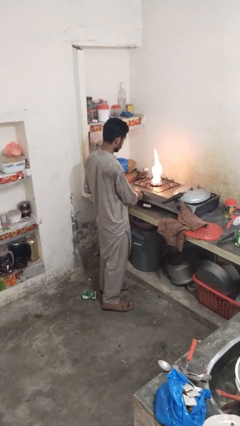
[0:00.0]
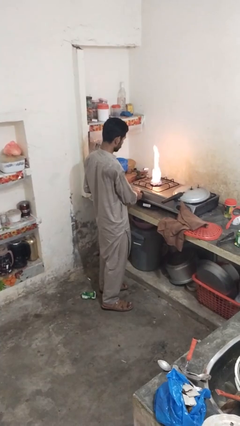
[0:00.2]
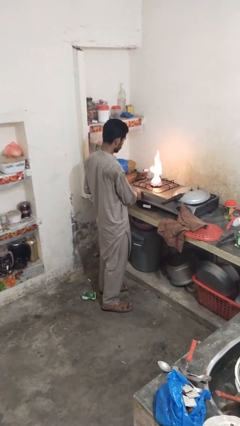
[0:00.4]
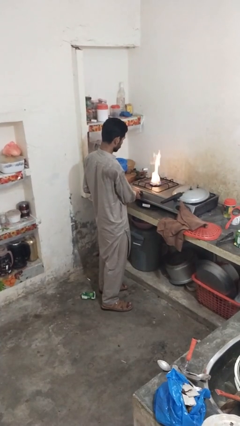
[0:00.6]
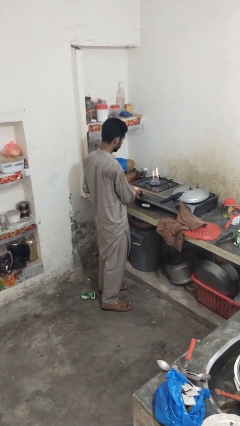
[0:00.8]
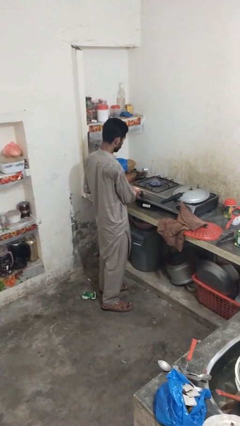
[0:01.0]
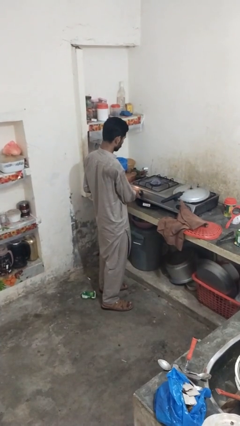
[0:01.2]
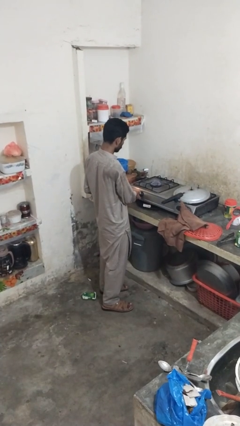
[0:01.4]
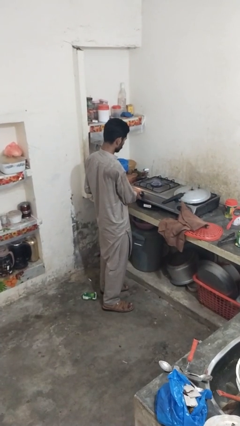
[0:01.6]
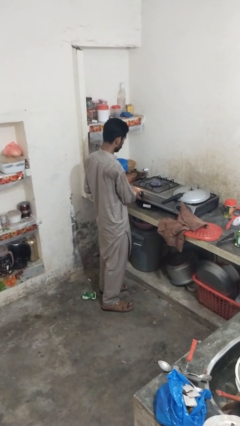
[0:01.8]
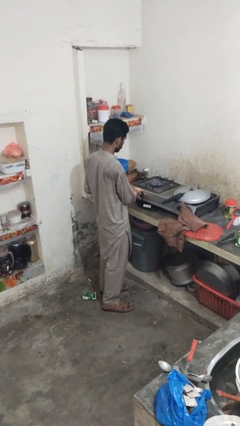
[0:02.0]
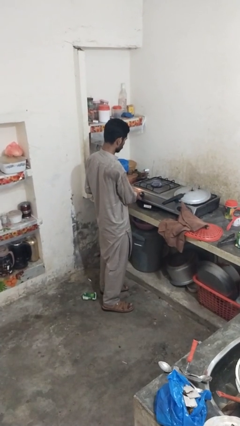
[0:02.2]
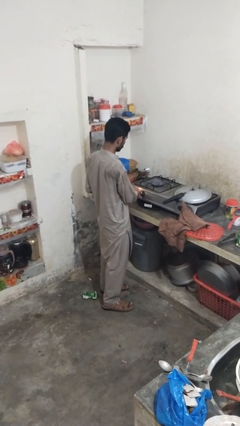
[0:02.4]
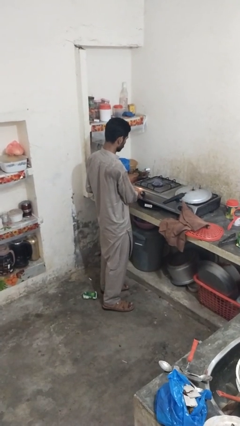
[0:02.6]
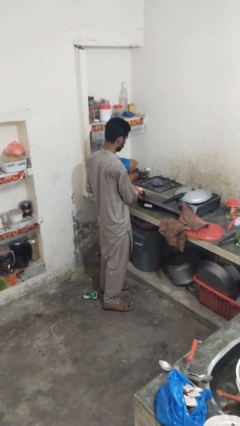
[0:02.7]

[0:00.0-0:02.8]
person turns off stovetop

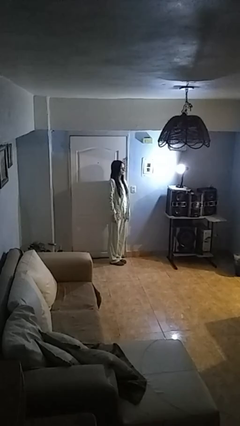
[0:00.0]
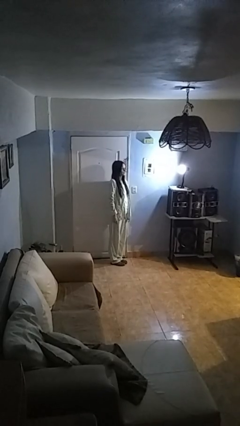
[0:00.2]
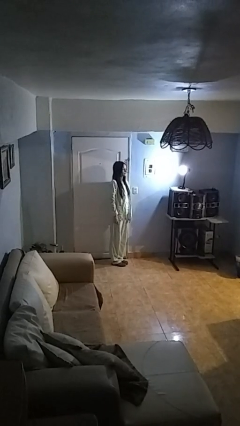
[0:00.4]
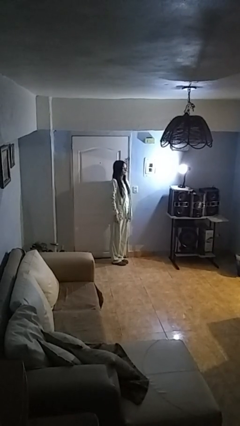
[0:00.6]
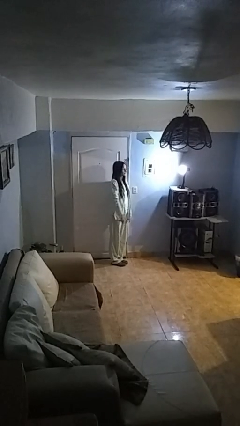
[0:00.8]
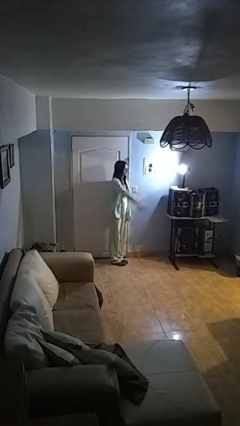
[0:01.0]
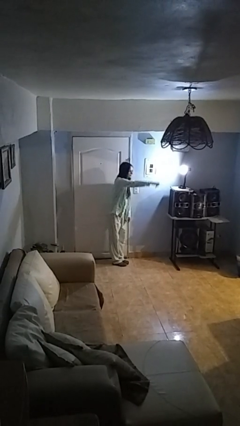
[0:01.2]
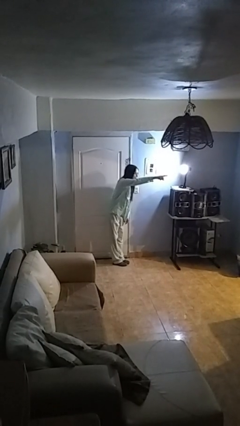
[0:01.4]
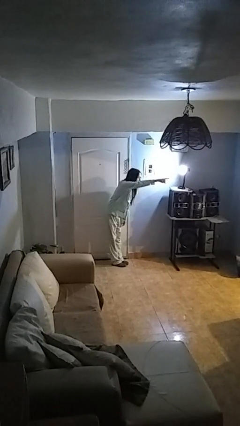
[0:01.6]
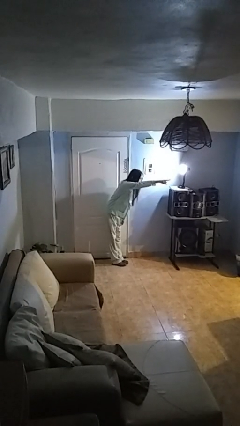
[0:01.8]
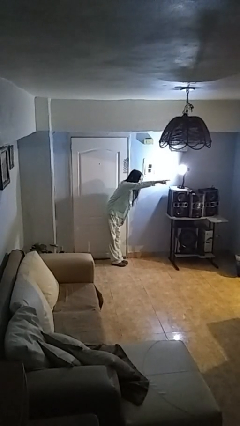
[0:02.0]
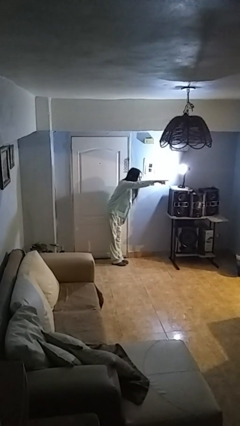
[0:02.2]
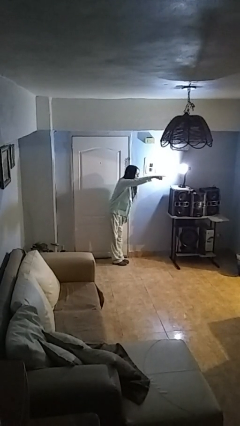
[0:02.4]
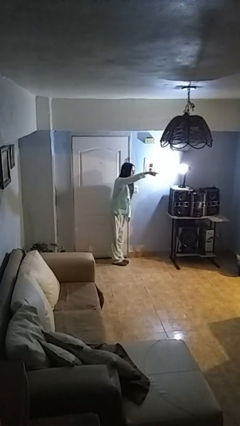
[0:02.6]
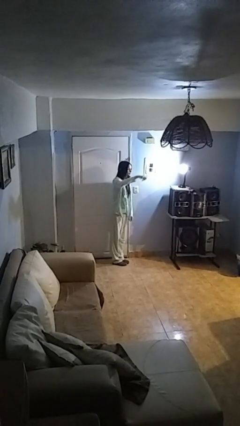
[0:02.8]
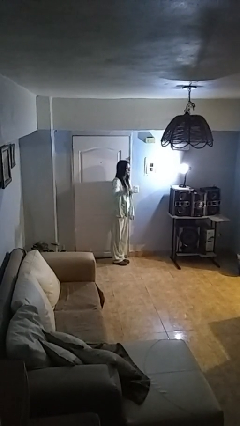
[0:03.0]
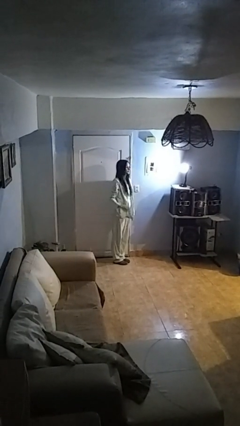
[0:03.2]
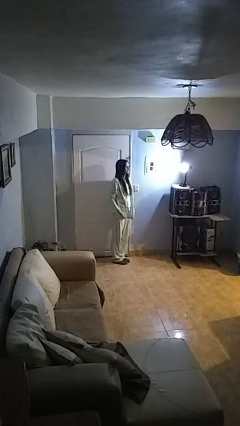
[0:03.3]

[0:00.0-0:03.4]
person points at person

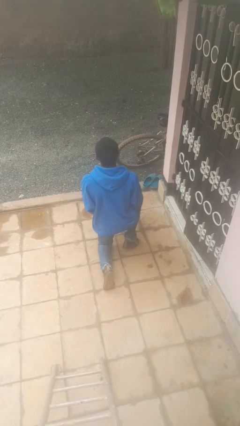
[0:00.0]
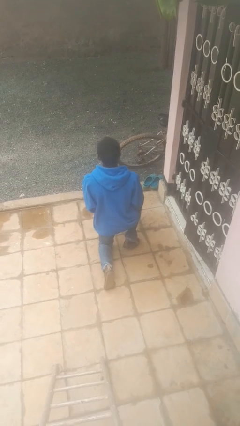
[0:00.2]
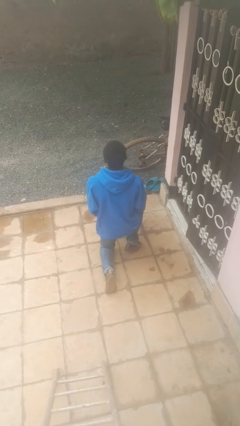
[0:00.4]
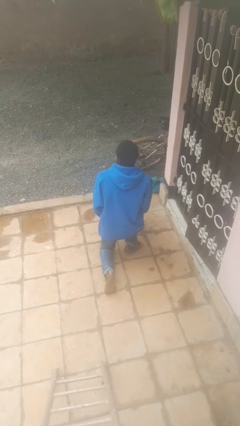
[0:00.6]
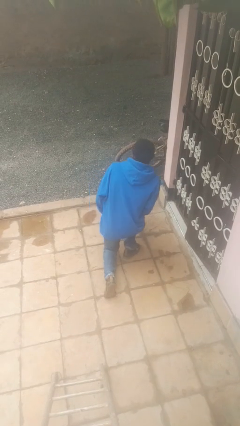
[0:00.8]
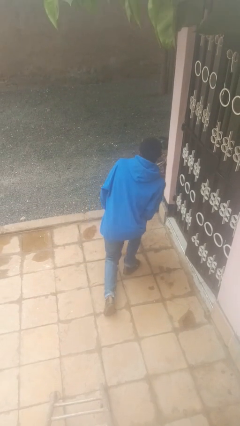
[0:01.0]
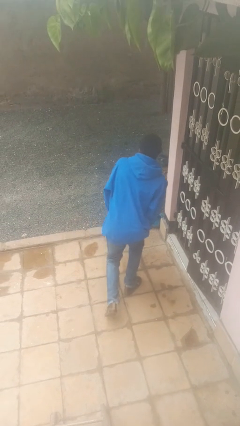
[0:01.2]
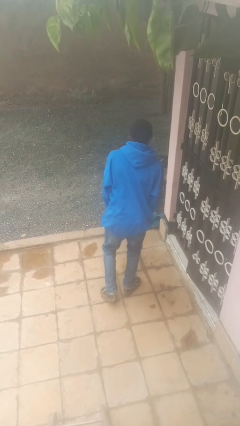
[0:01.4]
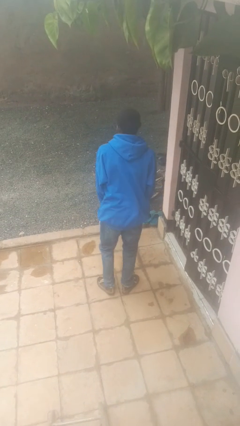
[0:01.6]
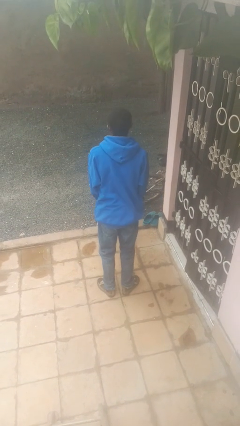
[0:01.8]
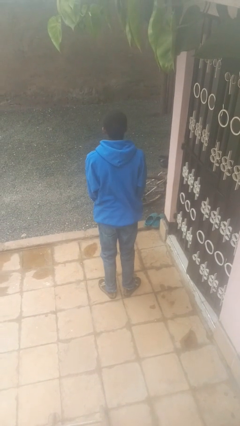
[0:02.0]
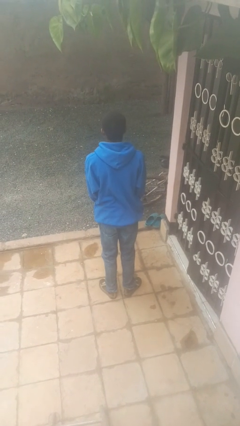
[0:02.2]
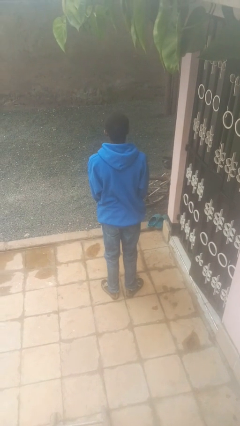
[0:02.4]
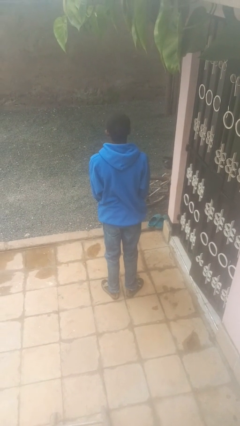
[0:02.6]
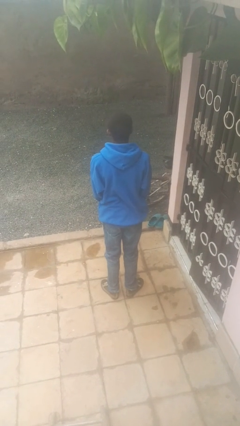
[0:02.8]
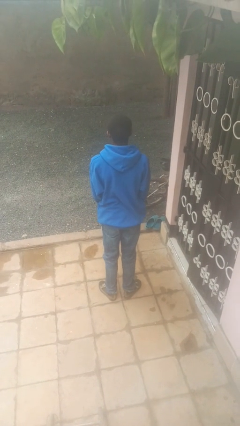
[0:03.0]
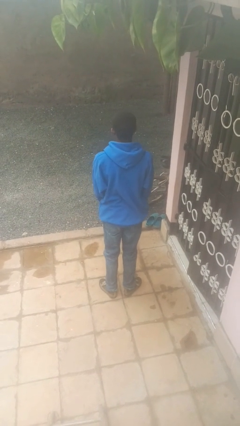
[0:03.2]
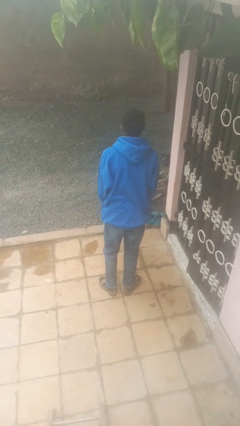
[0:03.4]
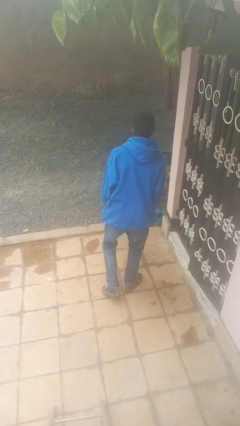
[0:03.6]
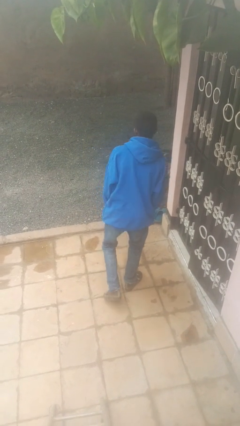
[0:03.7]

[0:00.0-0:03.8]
person stands up from floor

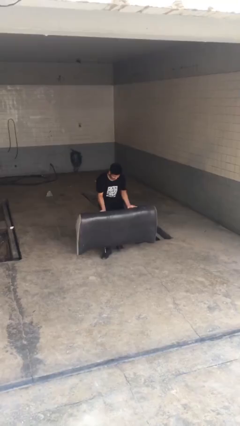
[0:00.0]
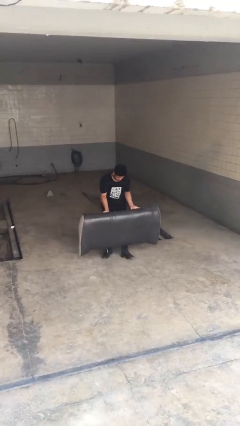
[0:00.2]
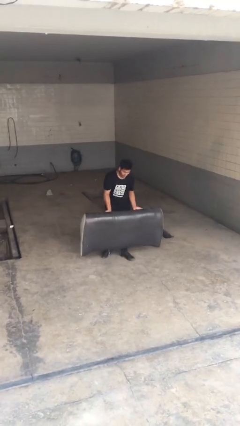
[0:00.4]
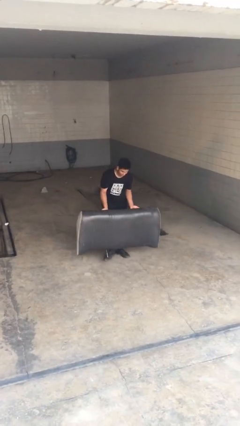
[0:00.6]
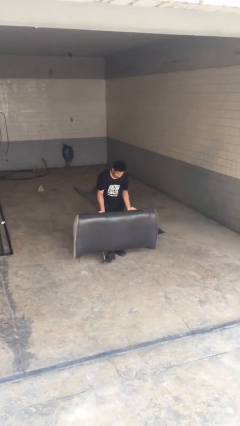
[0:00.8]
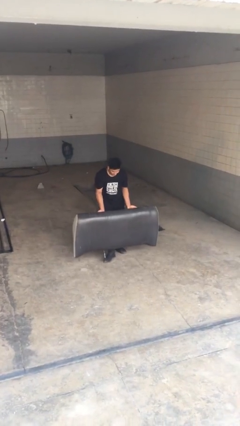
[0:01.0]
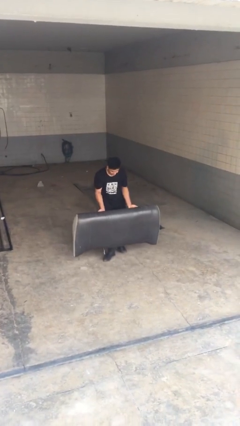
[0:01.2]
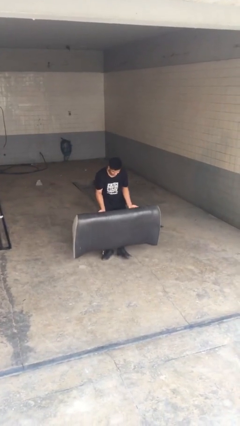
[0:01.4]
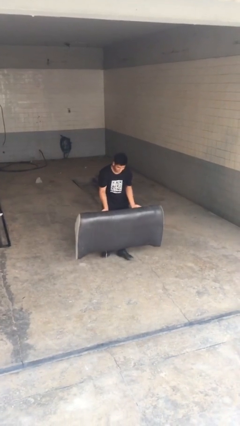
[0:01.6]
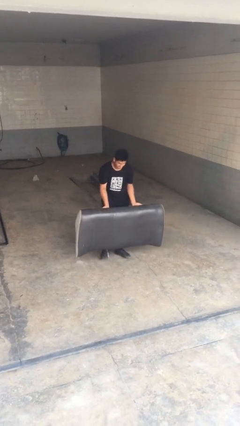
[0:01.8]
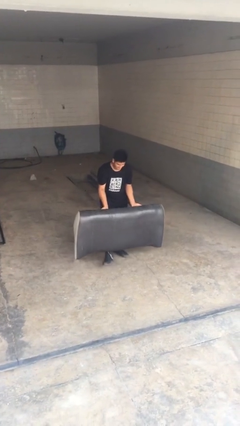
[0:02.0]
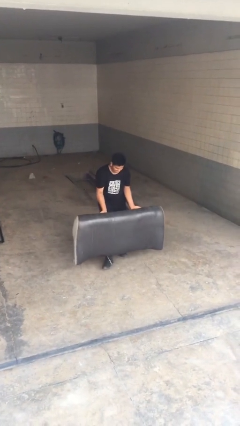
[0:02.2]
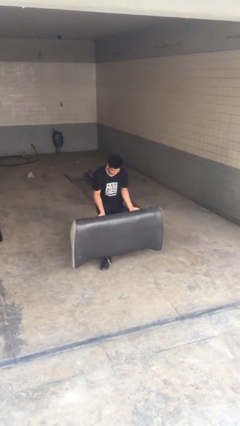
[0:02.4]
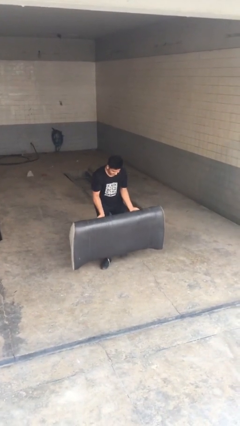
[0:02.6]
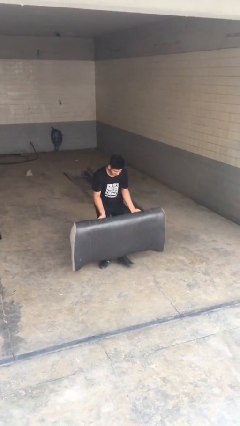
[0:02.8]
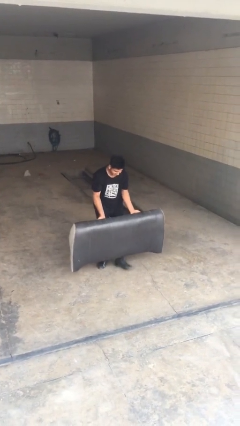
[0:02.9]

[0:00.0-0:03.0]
person carries heavy object

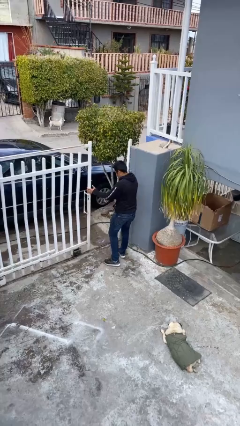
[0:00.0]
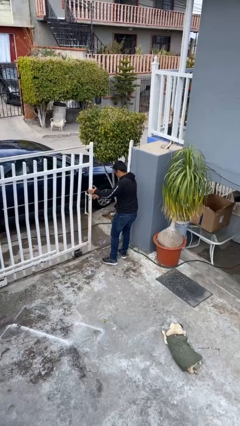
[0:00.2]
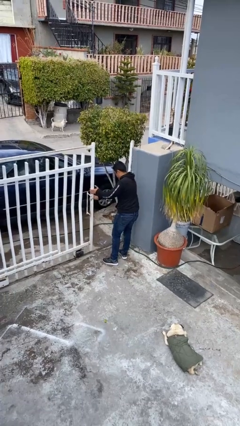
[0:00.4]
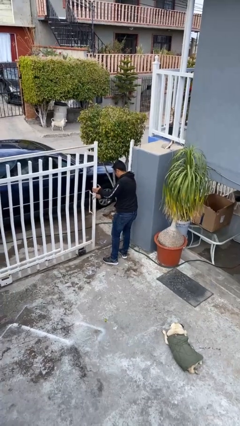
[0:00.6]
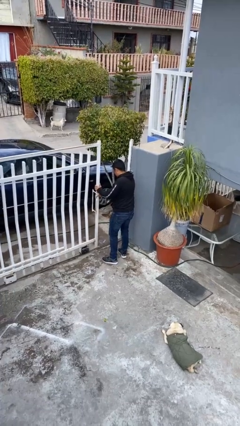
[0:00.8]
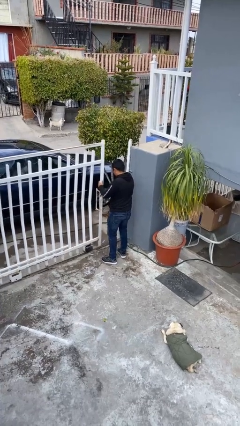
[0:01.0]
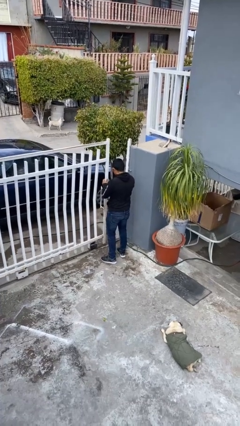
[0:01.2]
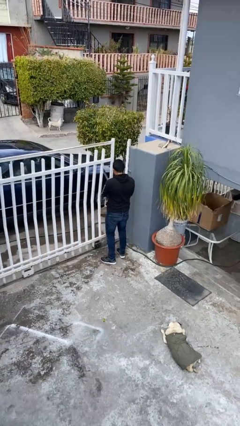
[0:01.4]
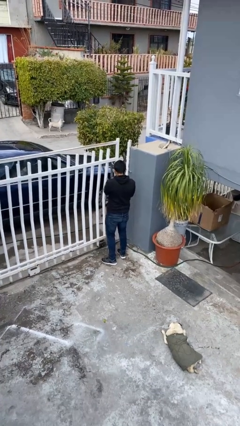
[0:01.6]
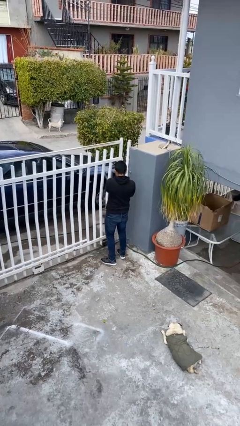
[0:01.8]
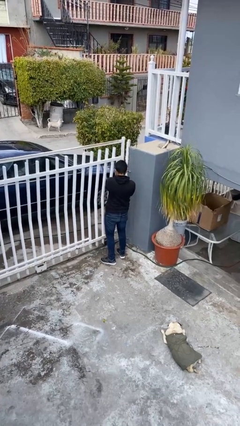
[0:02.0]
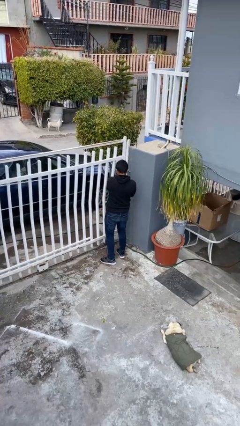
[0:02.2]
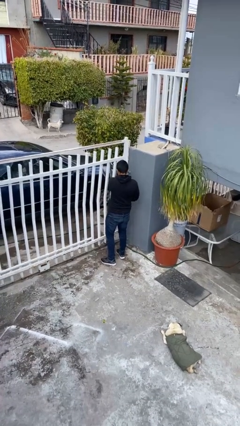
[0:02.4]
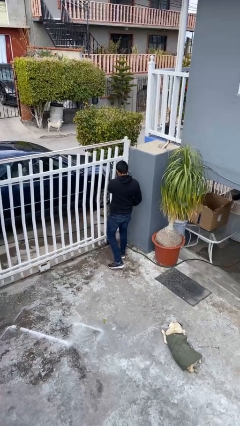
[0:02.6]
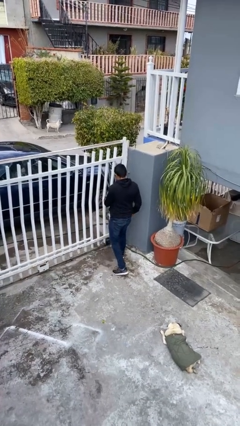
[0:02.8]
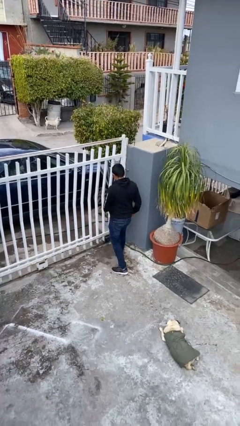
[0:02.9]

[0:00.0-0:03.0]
person closes facility door

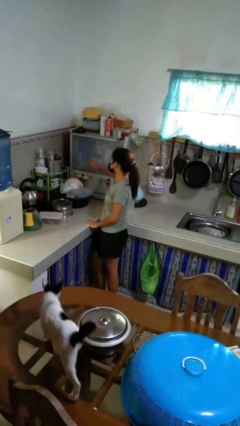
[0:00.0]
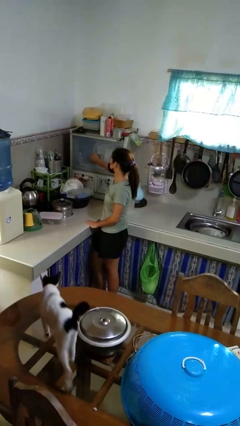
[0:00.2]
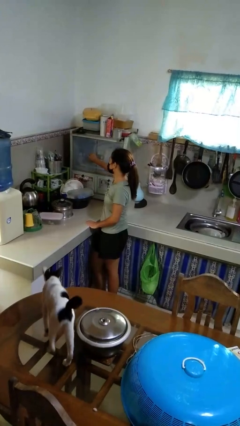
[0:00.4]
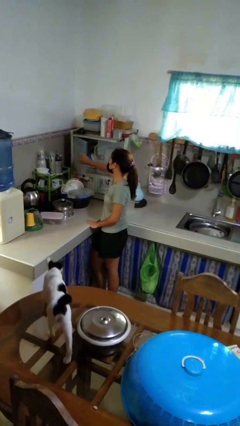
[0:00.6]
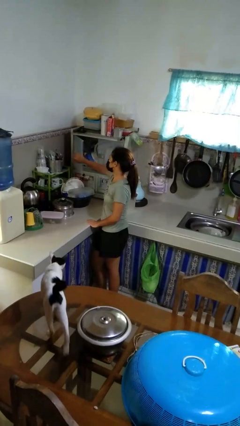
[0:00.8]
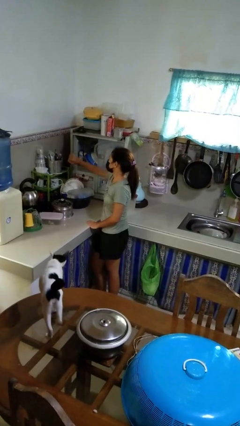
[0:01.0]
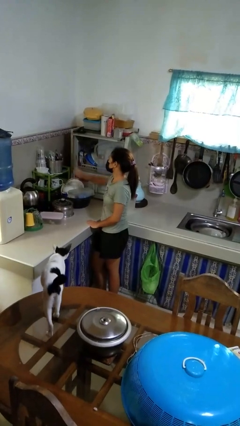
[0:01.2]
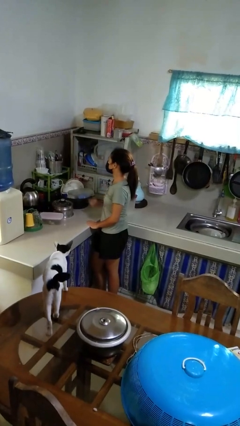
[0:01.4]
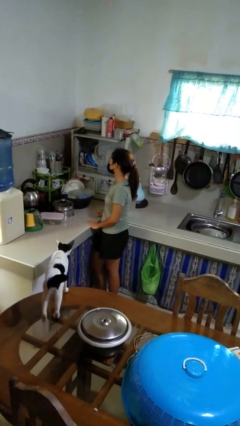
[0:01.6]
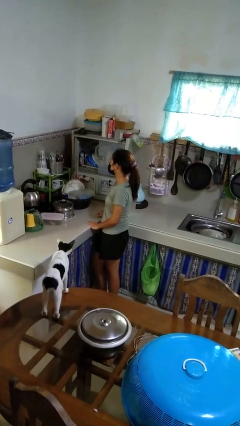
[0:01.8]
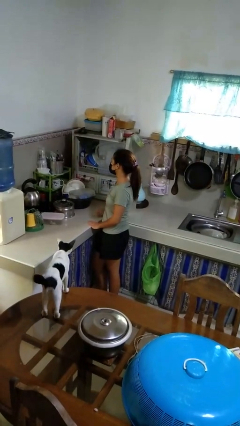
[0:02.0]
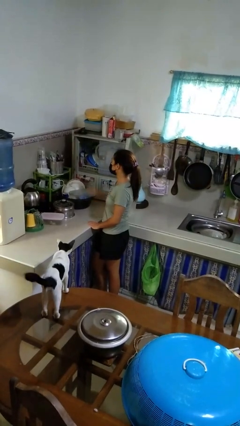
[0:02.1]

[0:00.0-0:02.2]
person opens kitchen drawer
